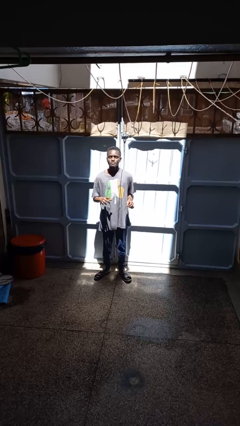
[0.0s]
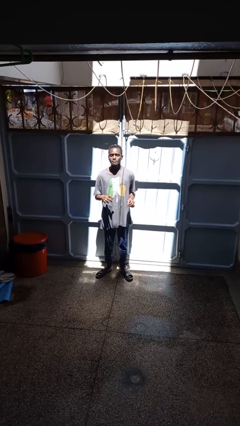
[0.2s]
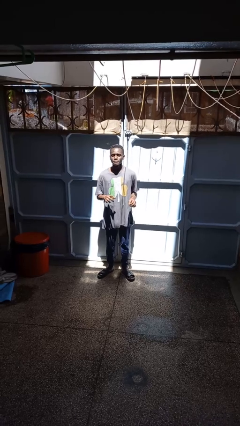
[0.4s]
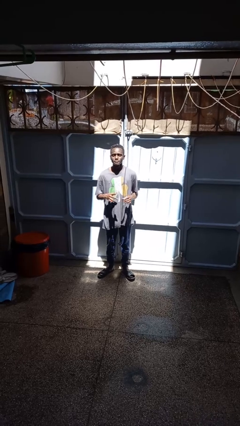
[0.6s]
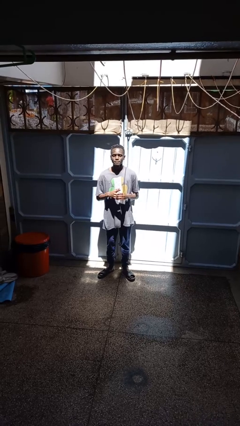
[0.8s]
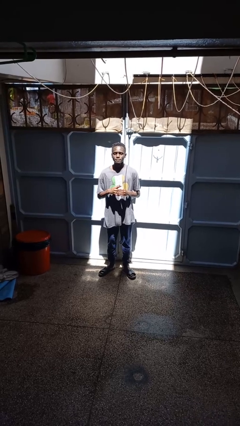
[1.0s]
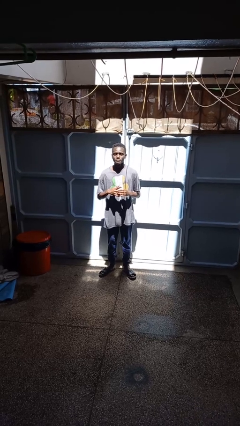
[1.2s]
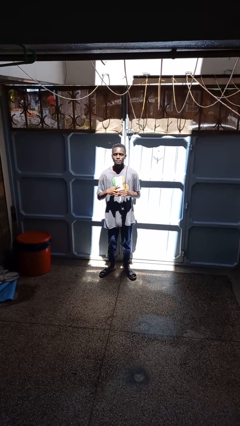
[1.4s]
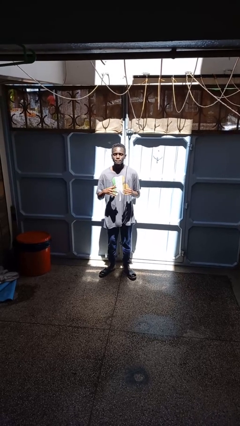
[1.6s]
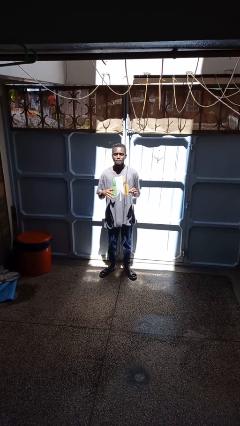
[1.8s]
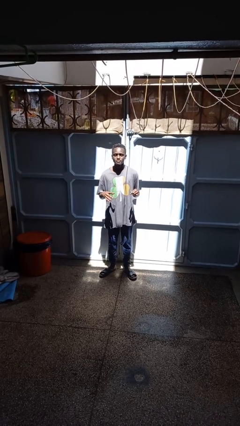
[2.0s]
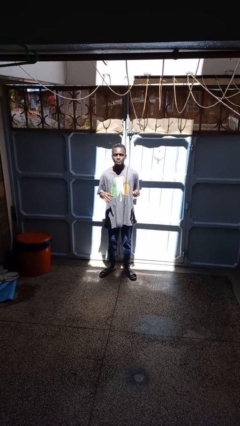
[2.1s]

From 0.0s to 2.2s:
person takes off ring

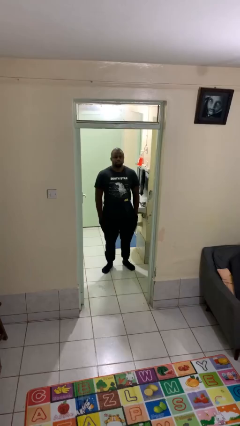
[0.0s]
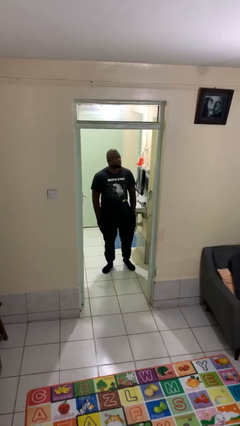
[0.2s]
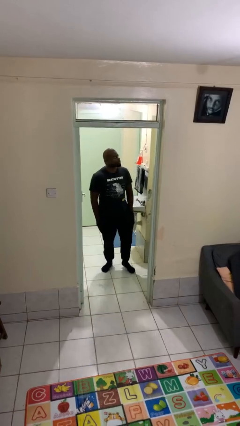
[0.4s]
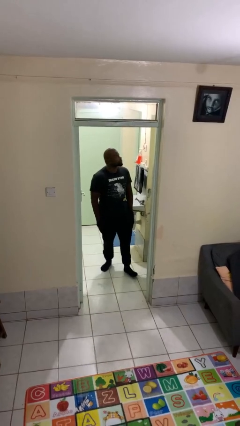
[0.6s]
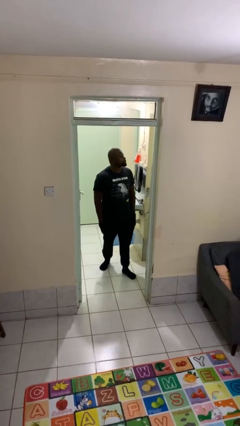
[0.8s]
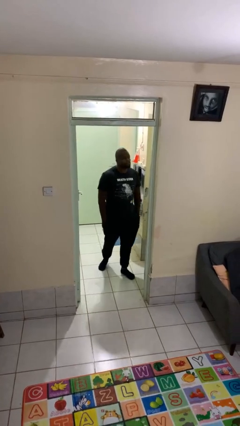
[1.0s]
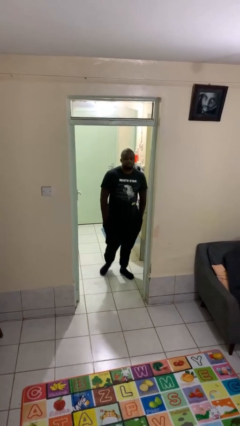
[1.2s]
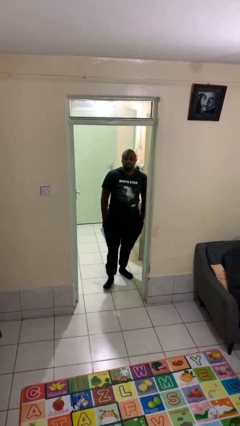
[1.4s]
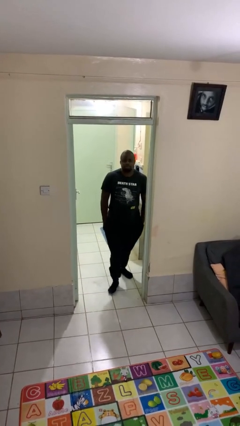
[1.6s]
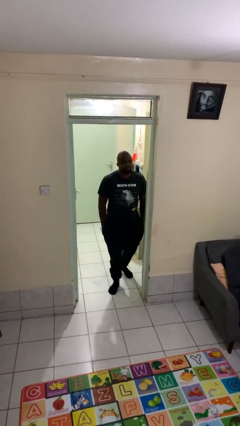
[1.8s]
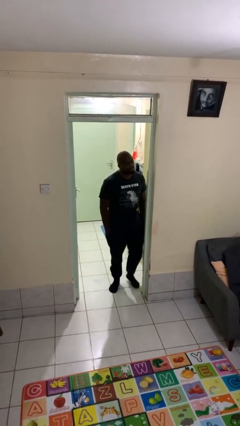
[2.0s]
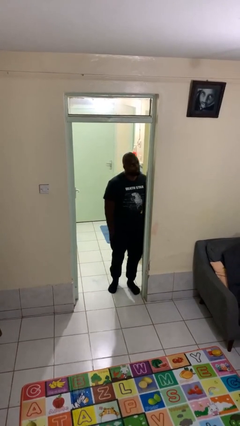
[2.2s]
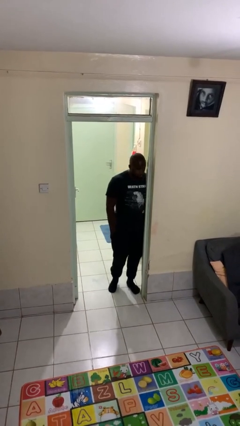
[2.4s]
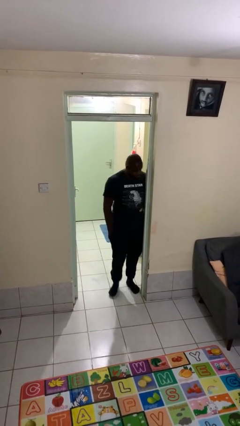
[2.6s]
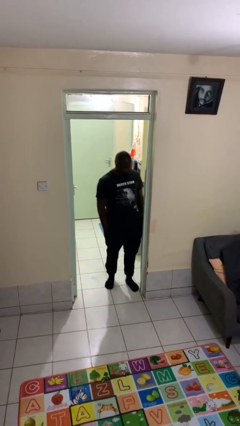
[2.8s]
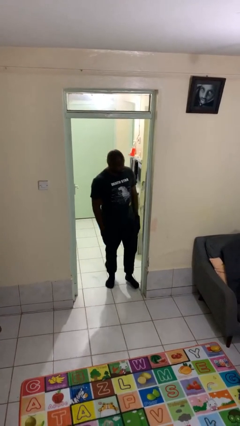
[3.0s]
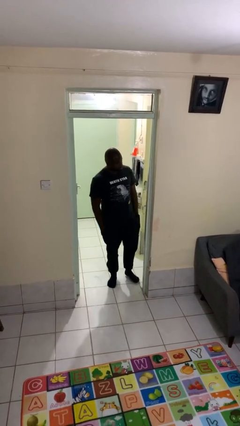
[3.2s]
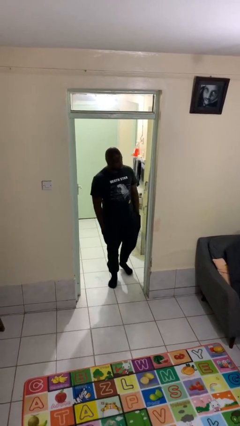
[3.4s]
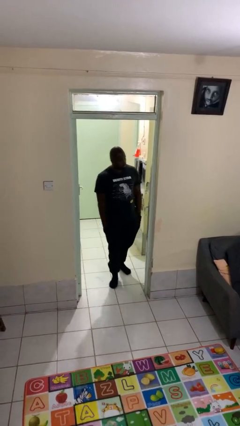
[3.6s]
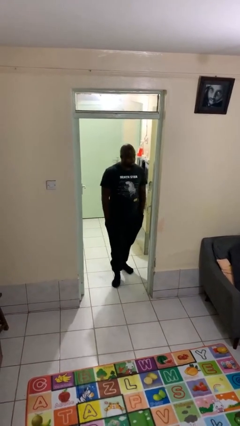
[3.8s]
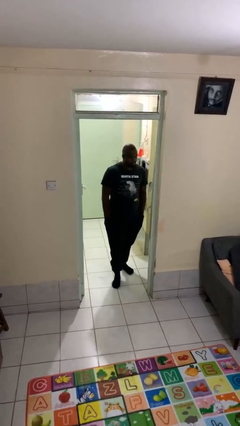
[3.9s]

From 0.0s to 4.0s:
person bumps into wall

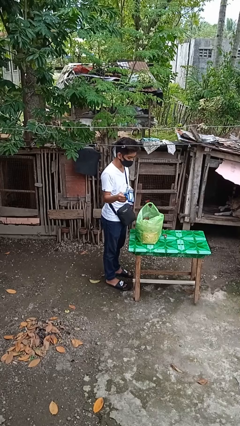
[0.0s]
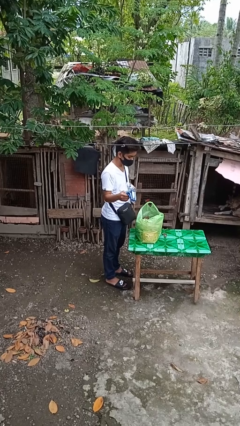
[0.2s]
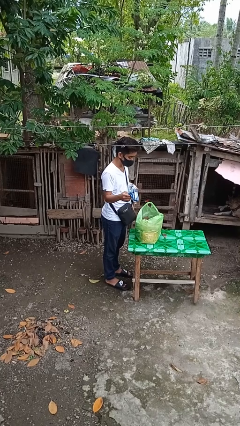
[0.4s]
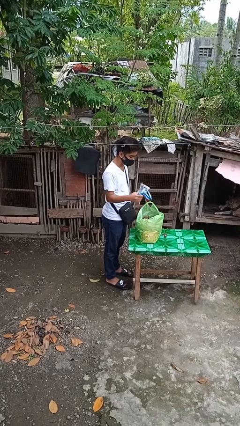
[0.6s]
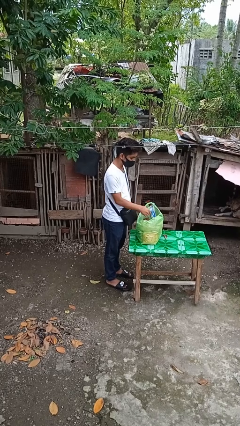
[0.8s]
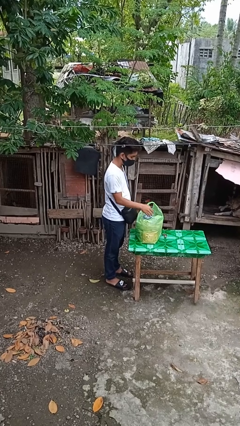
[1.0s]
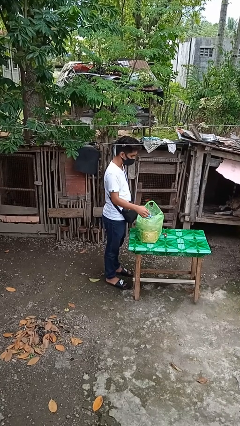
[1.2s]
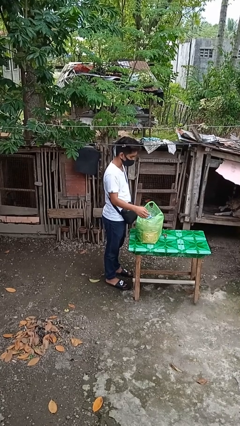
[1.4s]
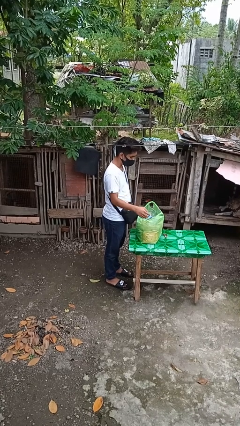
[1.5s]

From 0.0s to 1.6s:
person puts object into bag

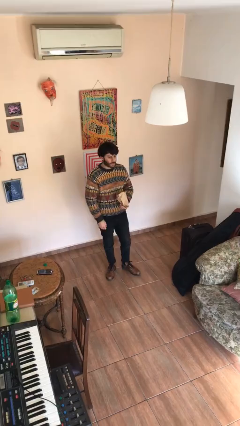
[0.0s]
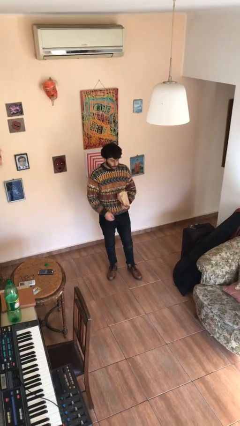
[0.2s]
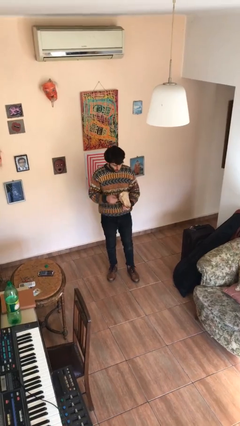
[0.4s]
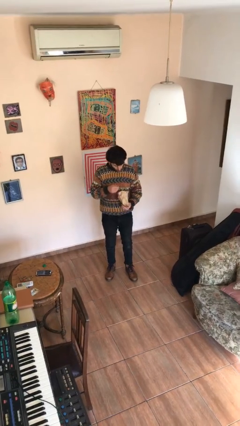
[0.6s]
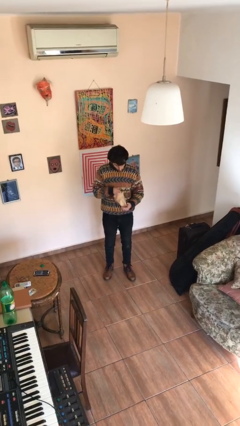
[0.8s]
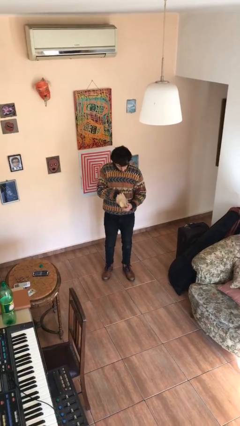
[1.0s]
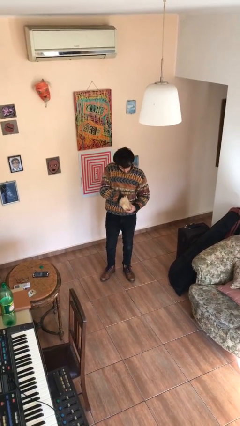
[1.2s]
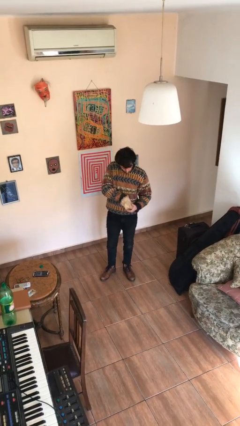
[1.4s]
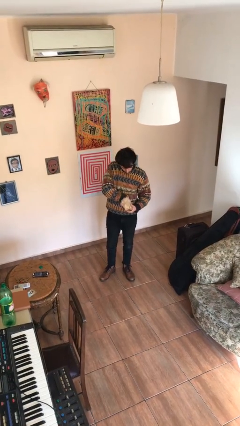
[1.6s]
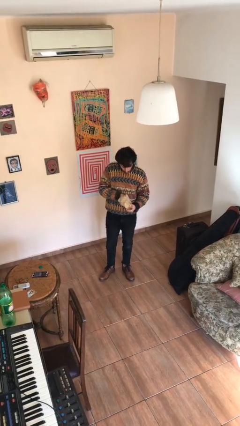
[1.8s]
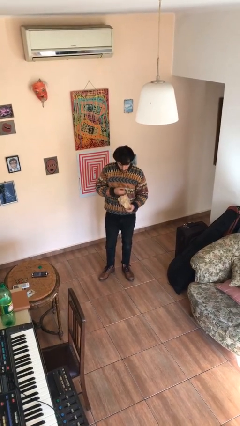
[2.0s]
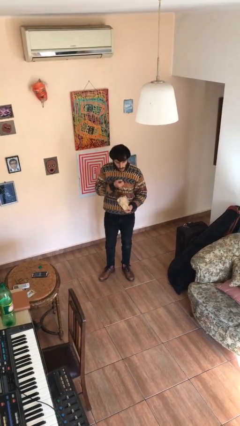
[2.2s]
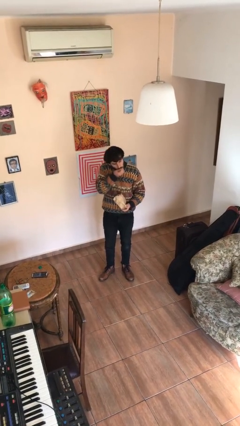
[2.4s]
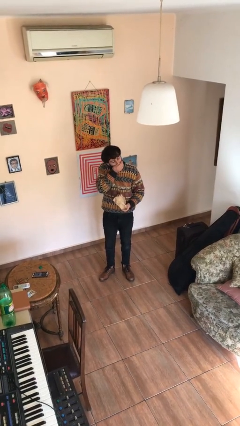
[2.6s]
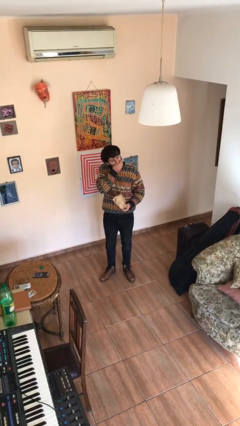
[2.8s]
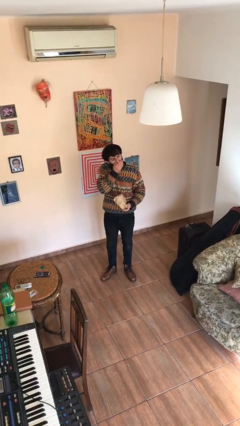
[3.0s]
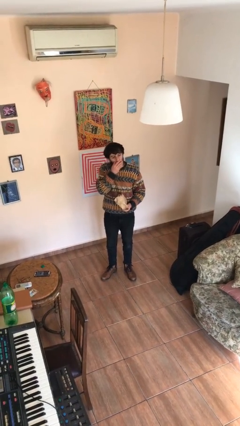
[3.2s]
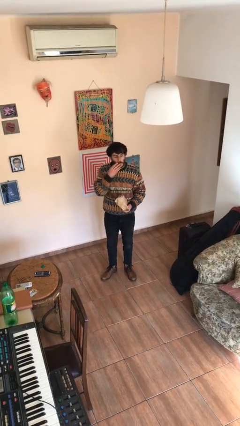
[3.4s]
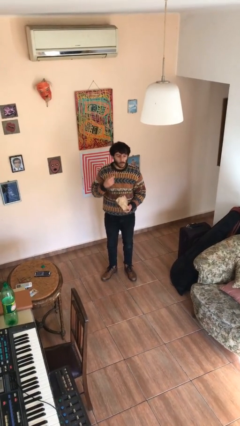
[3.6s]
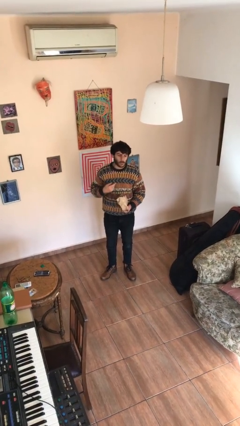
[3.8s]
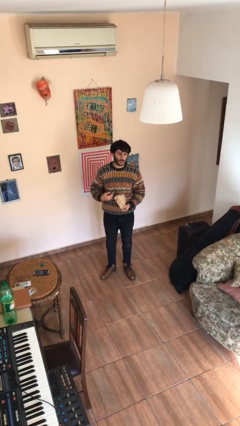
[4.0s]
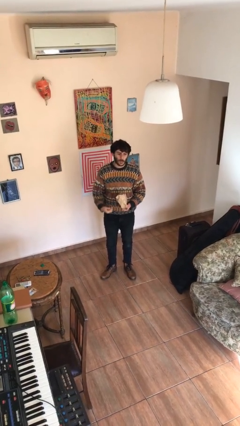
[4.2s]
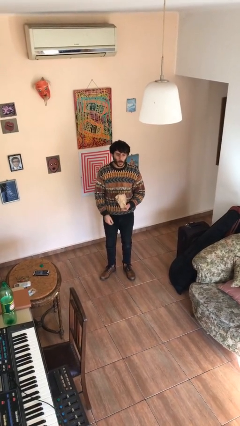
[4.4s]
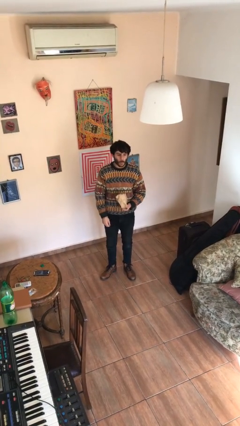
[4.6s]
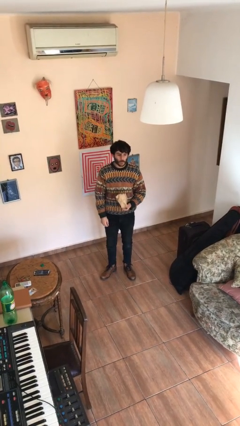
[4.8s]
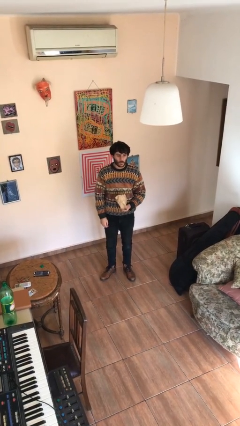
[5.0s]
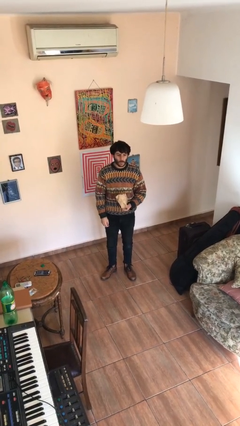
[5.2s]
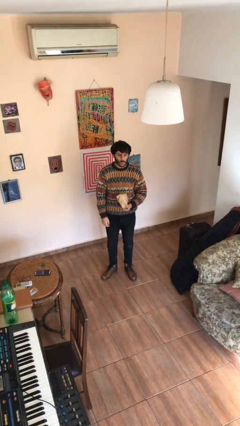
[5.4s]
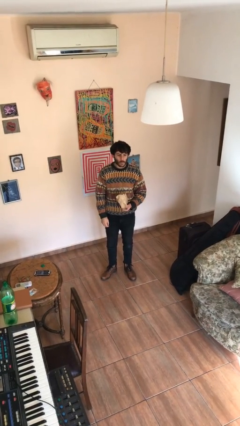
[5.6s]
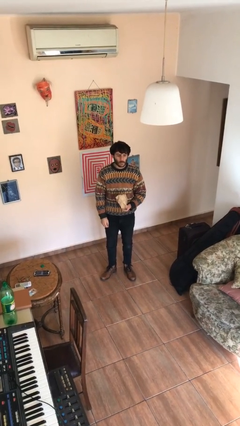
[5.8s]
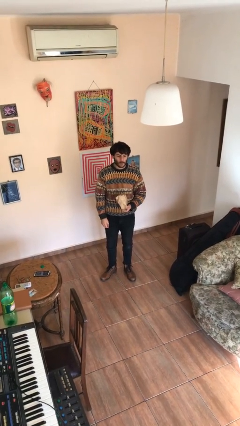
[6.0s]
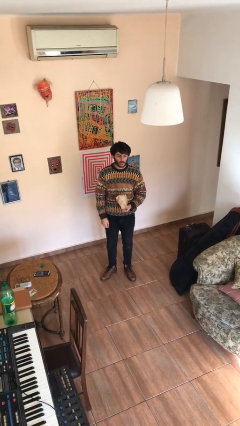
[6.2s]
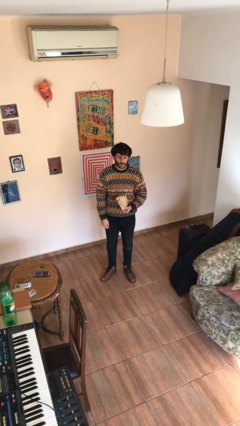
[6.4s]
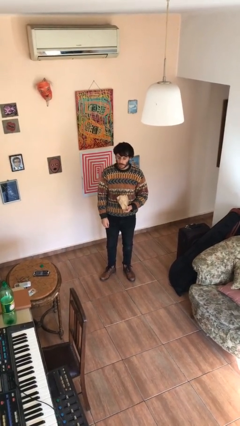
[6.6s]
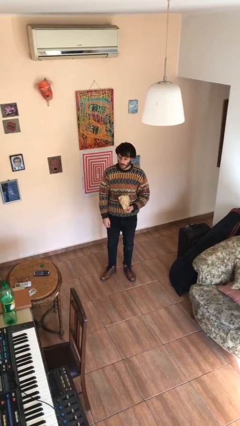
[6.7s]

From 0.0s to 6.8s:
person eats snack from bag

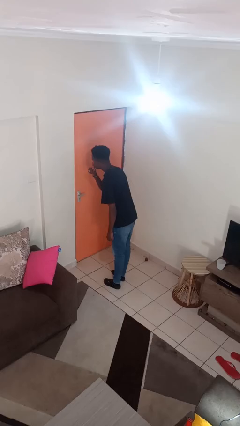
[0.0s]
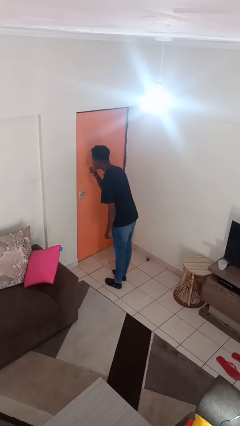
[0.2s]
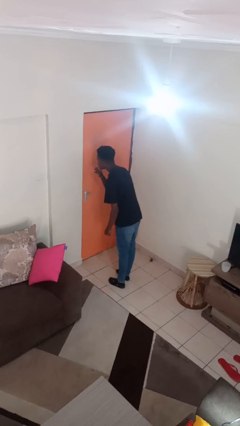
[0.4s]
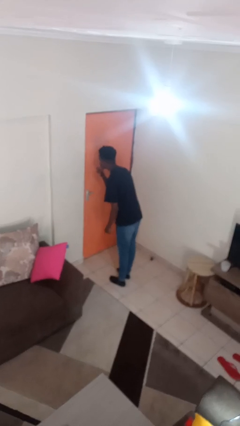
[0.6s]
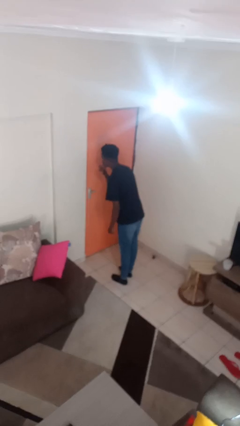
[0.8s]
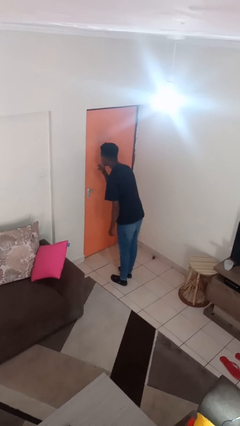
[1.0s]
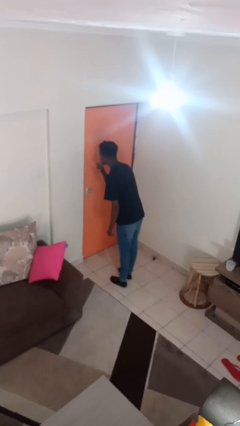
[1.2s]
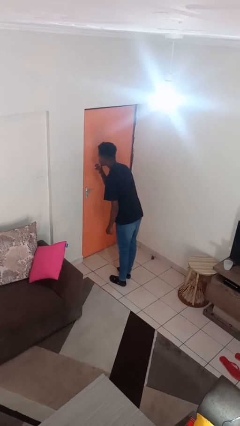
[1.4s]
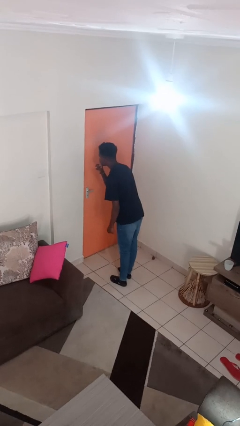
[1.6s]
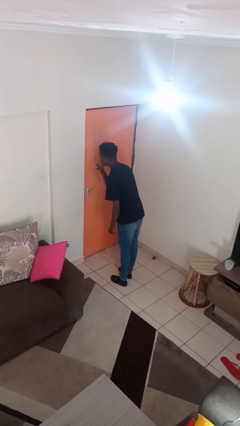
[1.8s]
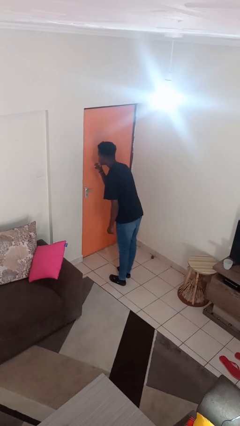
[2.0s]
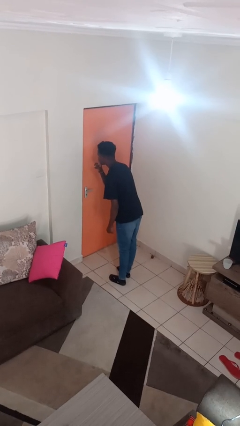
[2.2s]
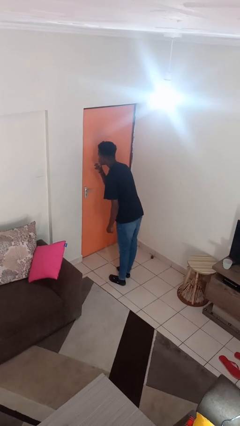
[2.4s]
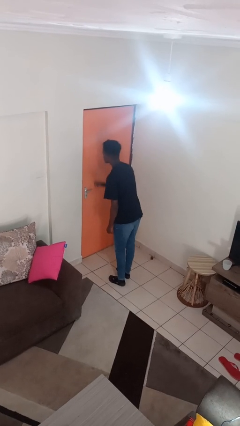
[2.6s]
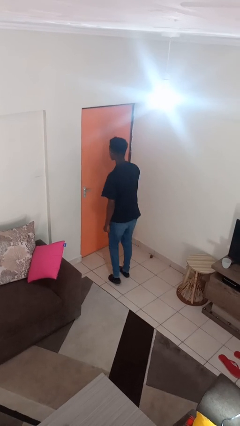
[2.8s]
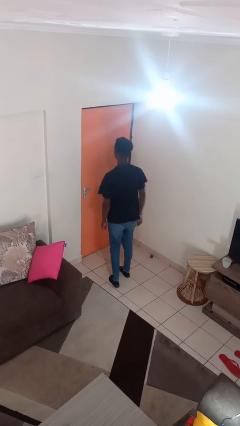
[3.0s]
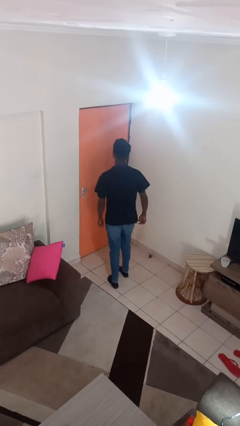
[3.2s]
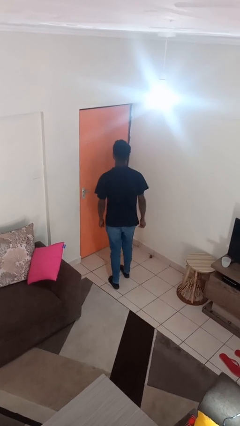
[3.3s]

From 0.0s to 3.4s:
person gestures be quiet
